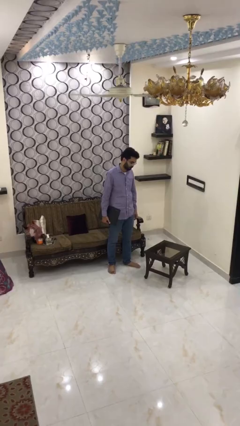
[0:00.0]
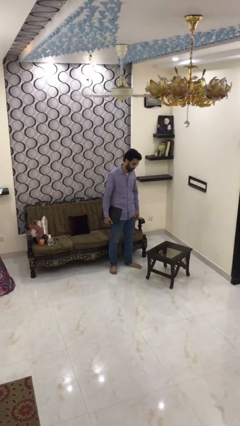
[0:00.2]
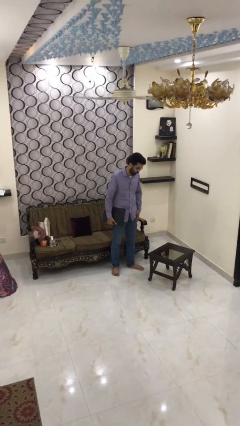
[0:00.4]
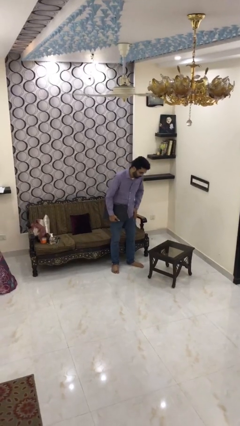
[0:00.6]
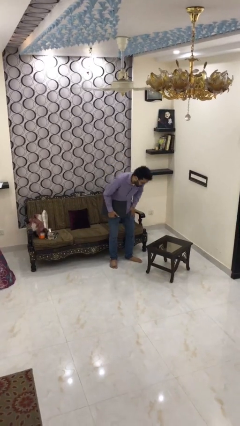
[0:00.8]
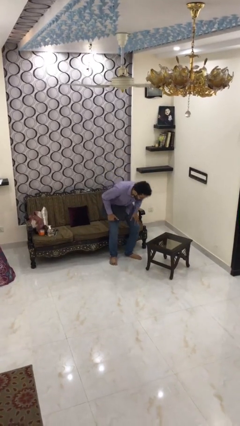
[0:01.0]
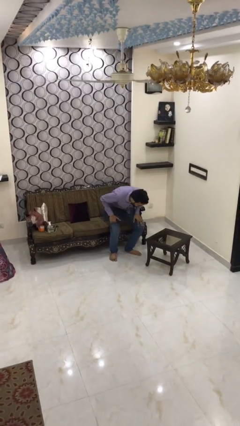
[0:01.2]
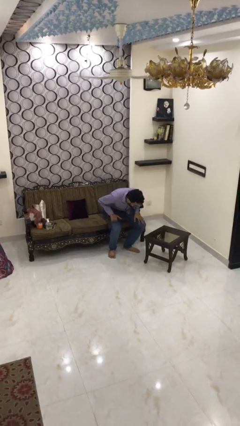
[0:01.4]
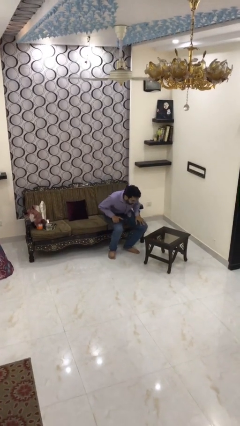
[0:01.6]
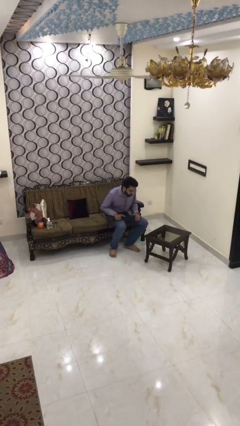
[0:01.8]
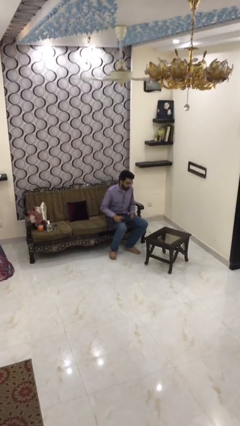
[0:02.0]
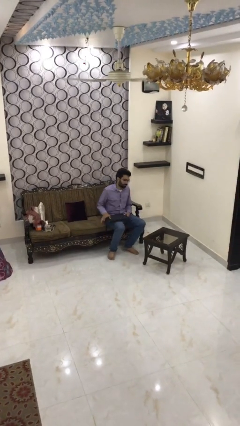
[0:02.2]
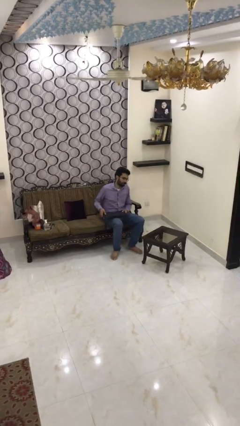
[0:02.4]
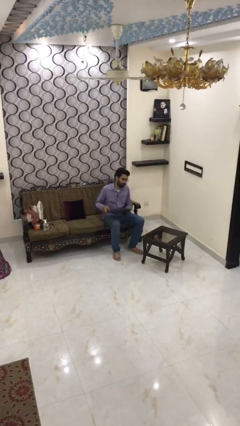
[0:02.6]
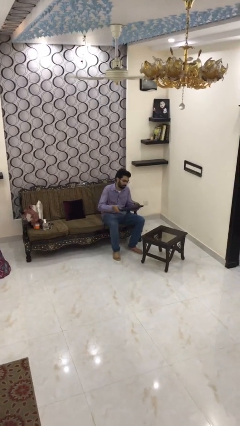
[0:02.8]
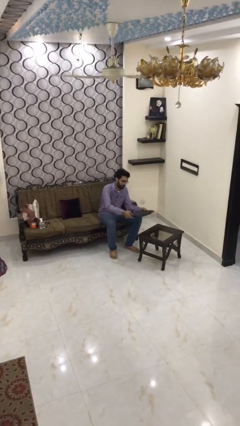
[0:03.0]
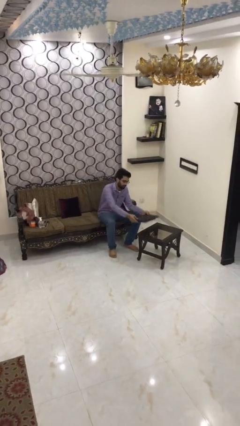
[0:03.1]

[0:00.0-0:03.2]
person sits down

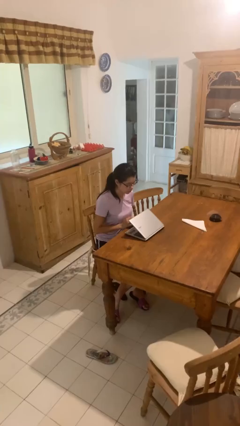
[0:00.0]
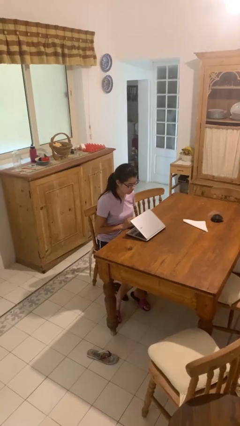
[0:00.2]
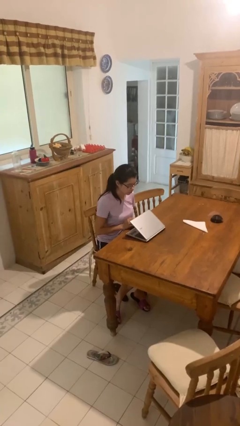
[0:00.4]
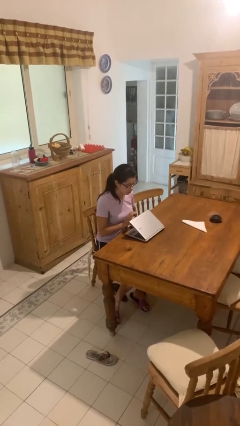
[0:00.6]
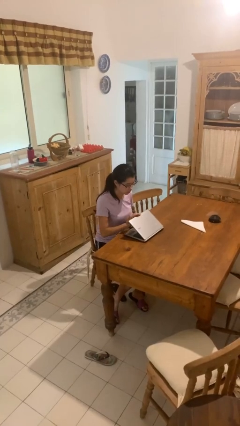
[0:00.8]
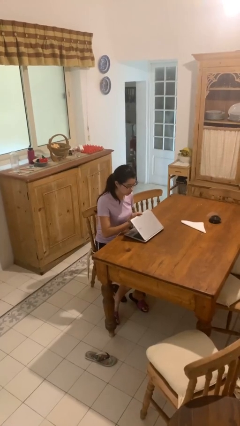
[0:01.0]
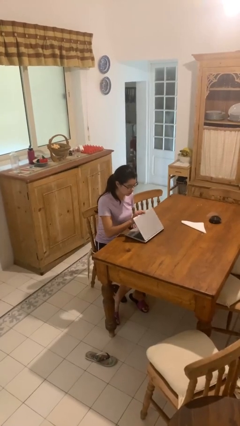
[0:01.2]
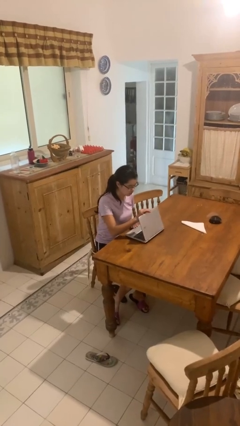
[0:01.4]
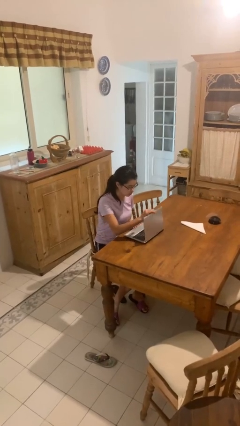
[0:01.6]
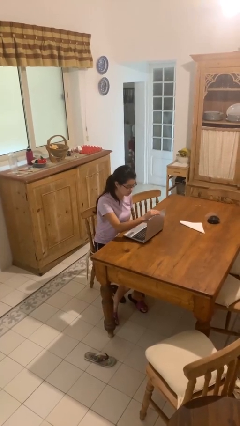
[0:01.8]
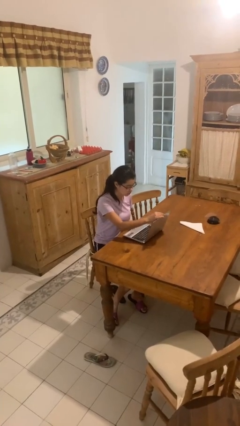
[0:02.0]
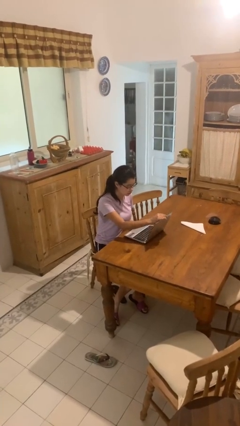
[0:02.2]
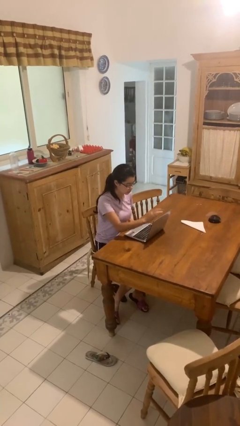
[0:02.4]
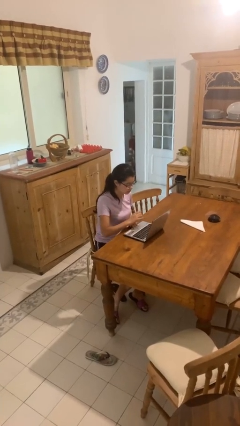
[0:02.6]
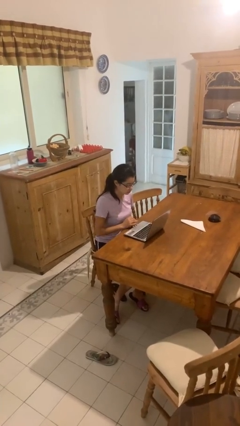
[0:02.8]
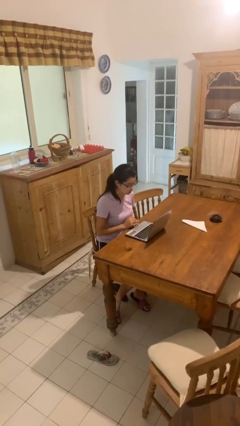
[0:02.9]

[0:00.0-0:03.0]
person opens laptop

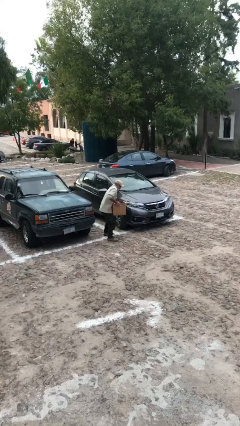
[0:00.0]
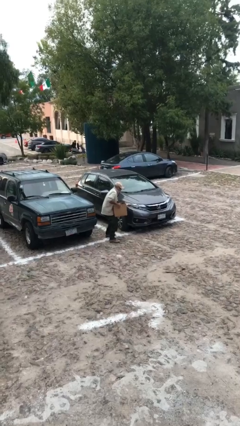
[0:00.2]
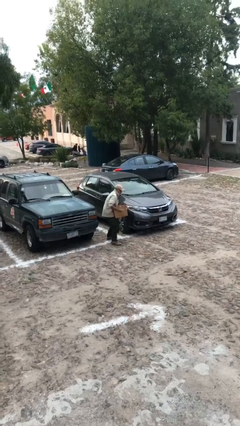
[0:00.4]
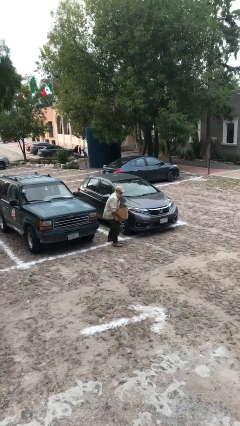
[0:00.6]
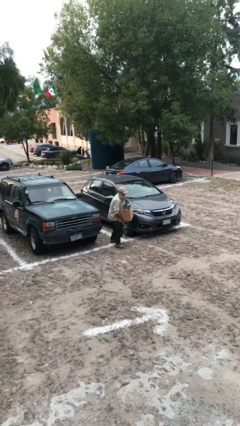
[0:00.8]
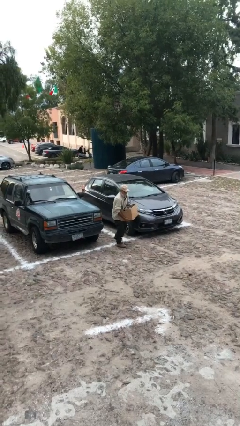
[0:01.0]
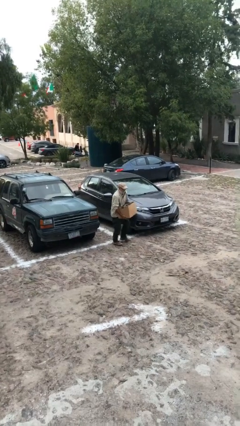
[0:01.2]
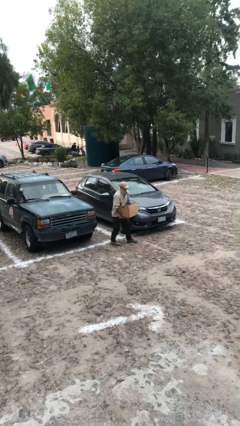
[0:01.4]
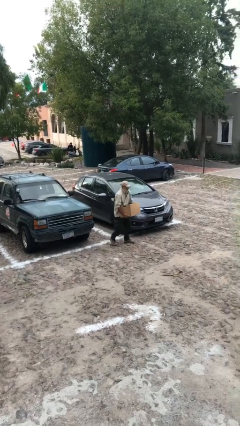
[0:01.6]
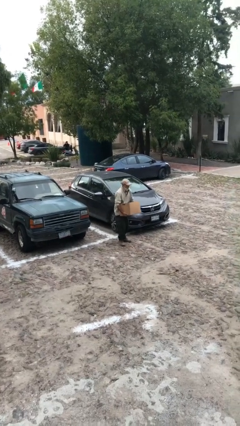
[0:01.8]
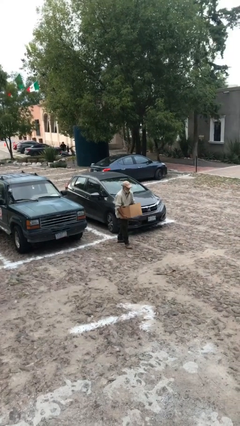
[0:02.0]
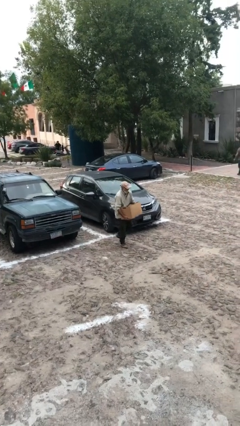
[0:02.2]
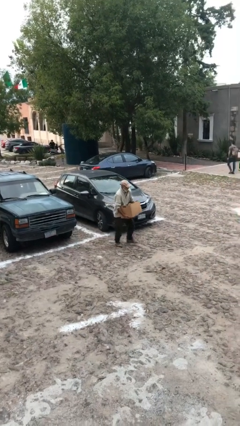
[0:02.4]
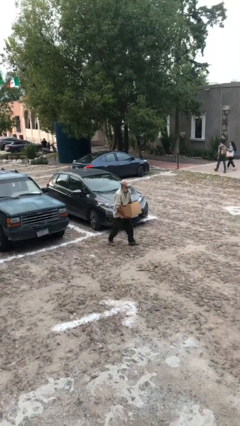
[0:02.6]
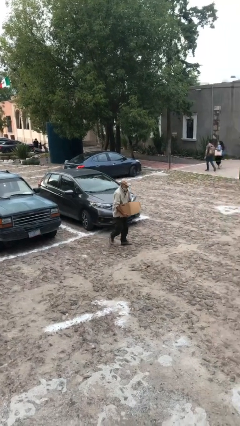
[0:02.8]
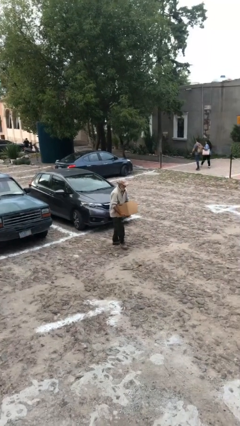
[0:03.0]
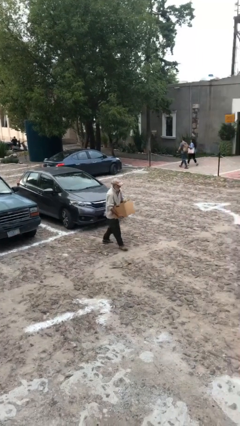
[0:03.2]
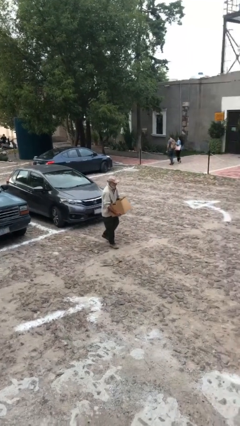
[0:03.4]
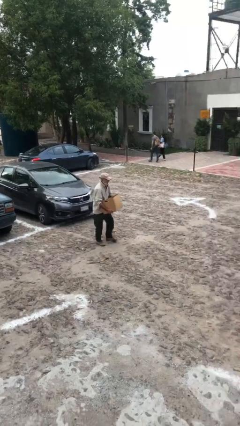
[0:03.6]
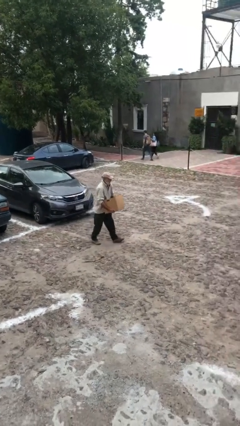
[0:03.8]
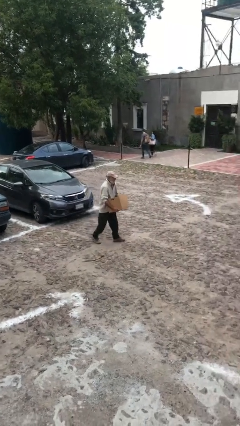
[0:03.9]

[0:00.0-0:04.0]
person carries heavy object

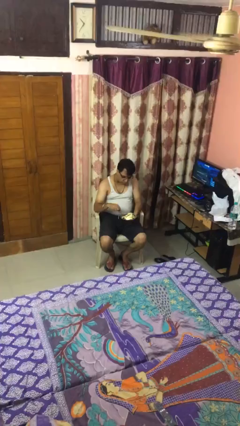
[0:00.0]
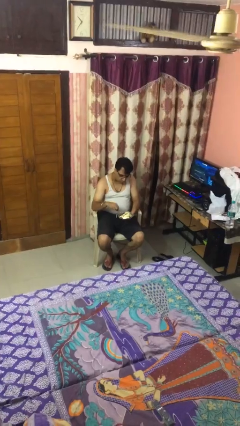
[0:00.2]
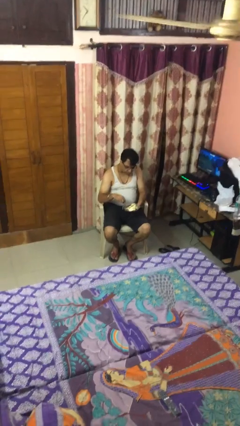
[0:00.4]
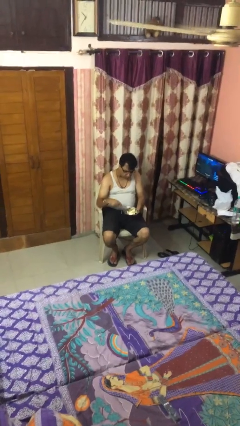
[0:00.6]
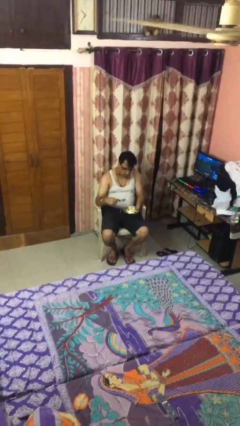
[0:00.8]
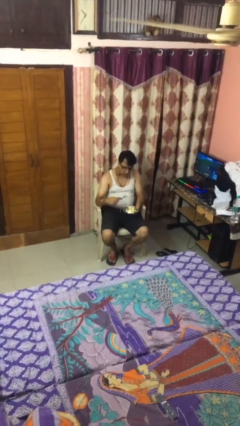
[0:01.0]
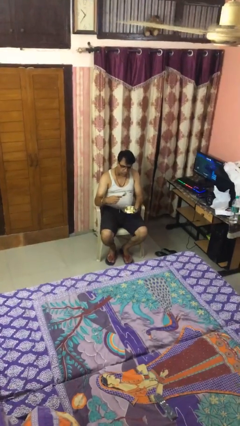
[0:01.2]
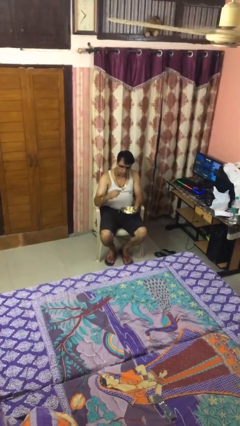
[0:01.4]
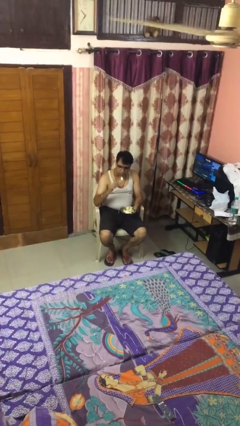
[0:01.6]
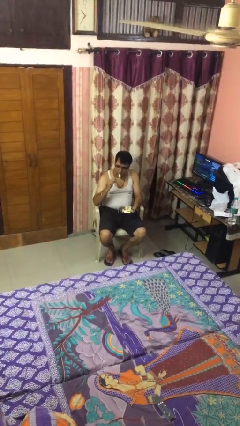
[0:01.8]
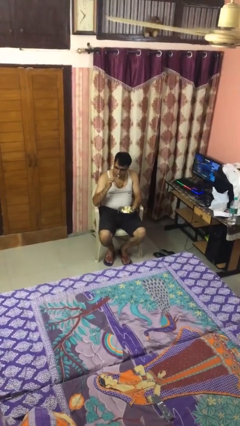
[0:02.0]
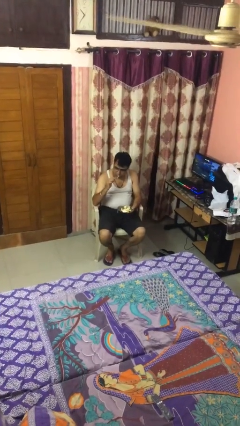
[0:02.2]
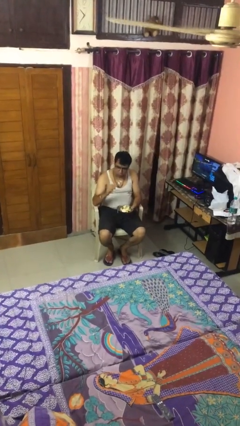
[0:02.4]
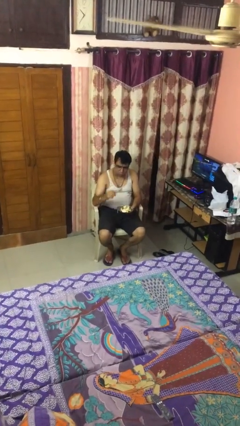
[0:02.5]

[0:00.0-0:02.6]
person eats with utensil

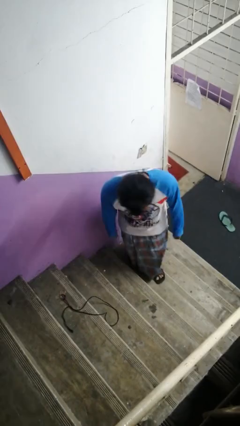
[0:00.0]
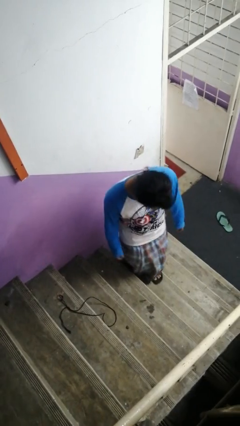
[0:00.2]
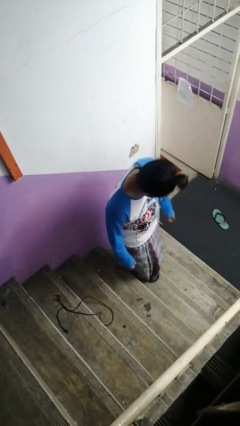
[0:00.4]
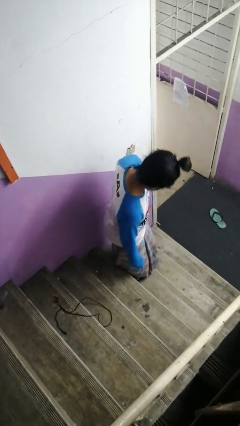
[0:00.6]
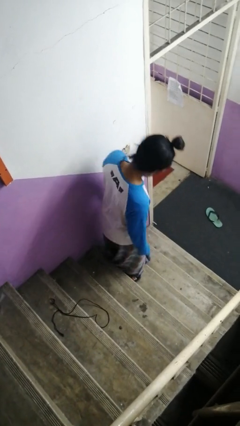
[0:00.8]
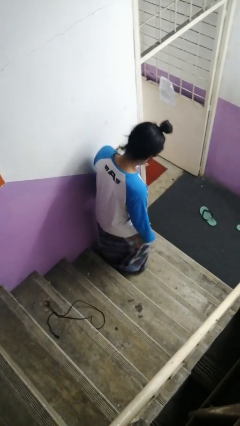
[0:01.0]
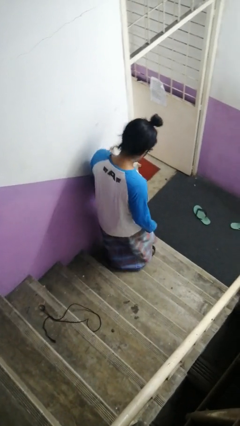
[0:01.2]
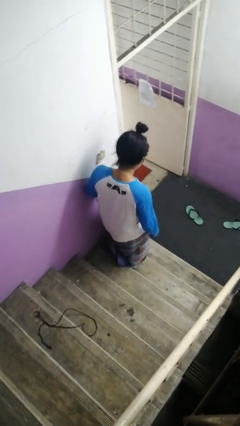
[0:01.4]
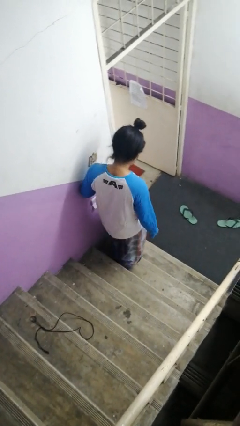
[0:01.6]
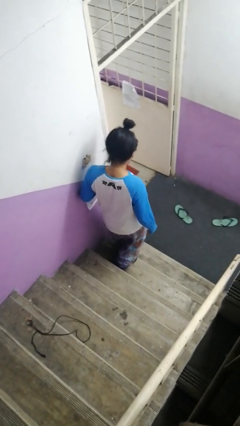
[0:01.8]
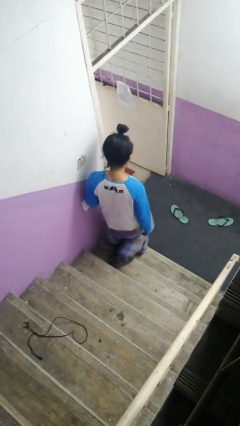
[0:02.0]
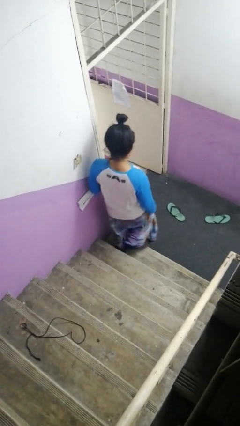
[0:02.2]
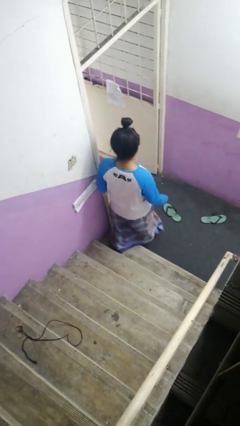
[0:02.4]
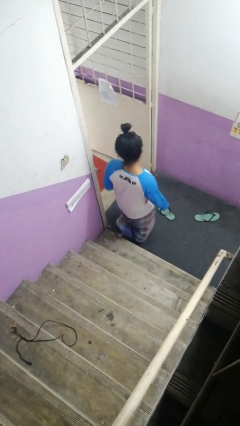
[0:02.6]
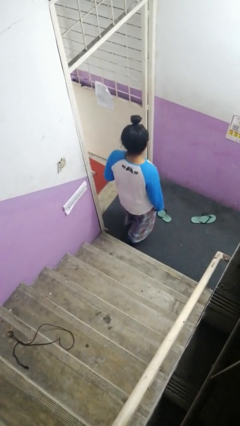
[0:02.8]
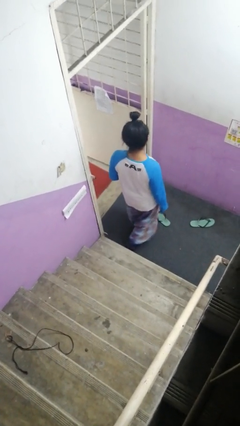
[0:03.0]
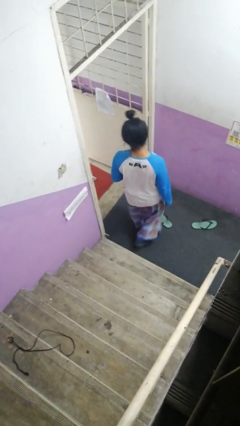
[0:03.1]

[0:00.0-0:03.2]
person climbs down stairs

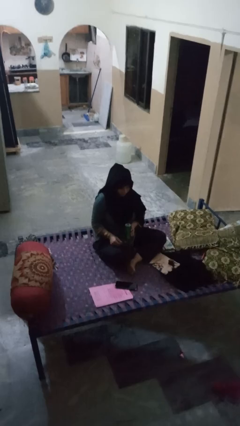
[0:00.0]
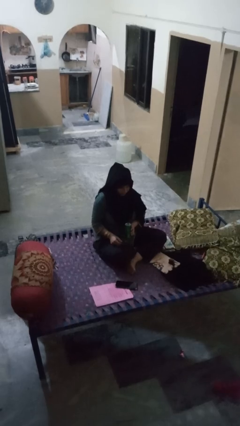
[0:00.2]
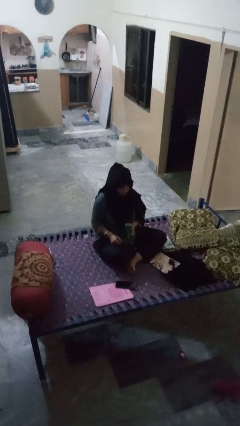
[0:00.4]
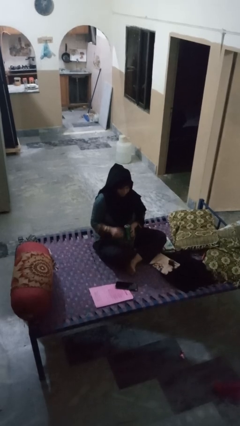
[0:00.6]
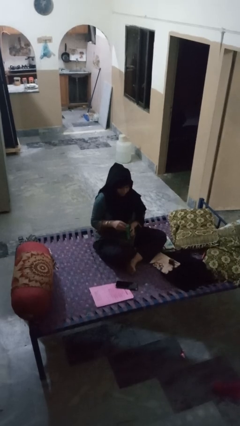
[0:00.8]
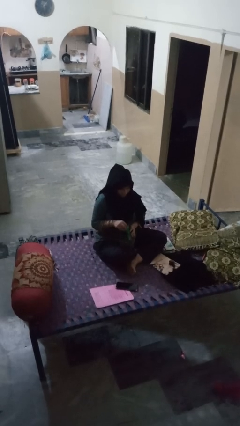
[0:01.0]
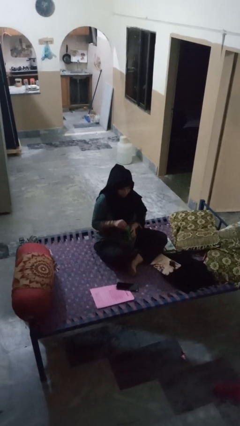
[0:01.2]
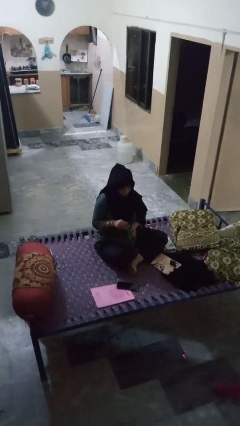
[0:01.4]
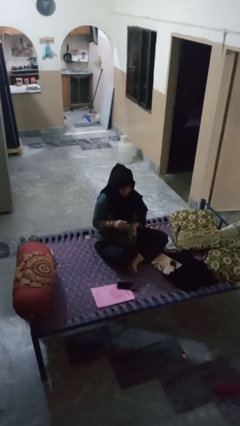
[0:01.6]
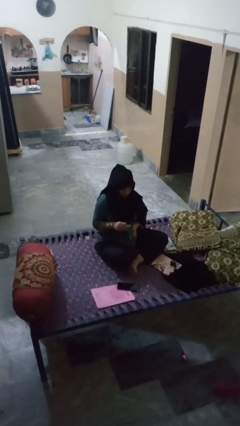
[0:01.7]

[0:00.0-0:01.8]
person opens can with can opener
